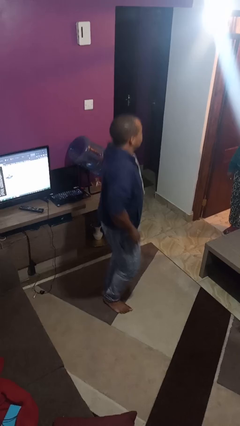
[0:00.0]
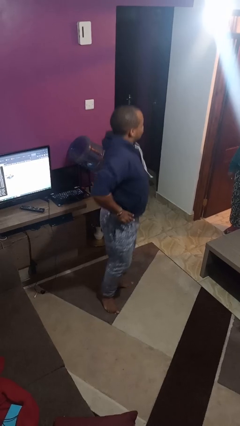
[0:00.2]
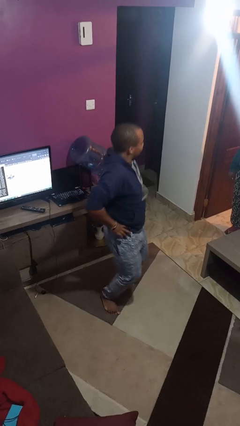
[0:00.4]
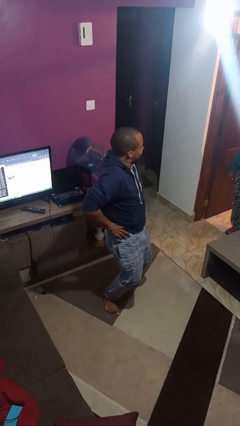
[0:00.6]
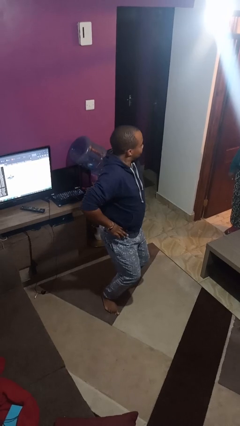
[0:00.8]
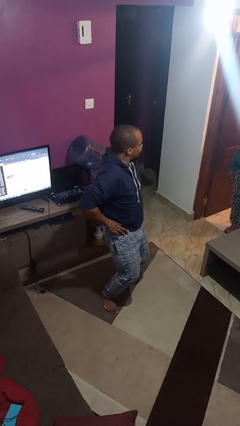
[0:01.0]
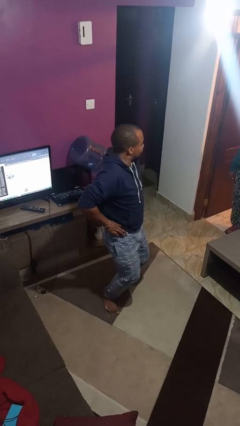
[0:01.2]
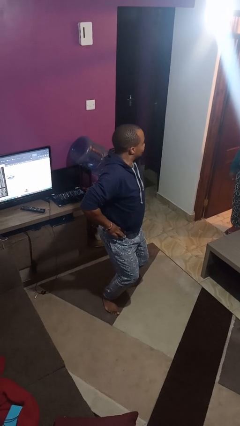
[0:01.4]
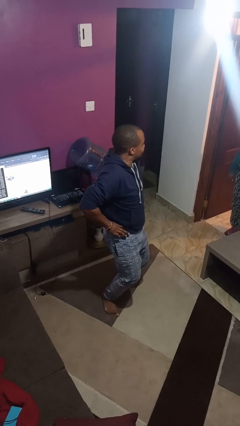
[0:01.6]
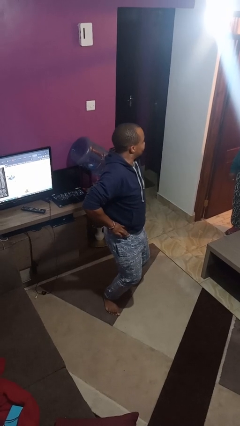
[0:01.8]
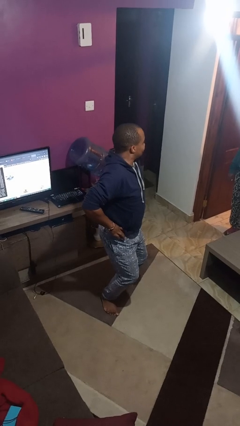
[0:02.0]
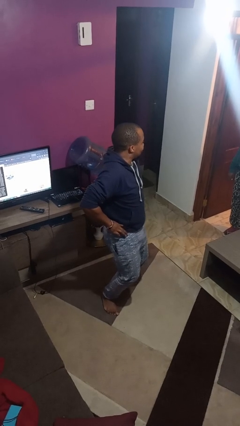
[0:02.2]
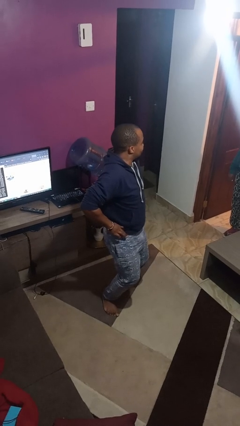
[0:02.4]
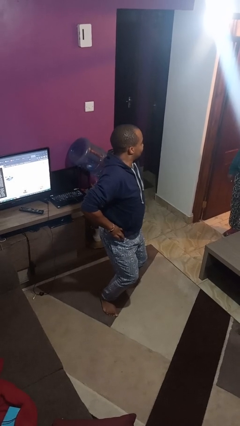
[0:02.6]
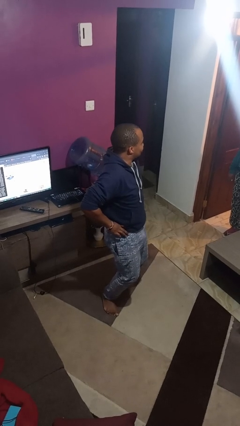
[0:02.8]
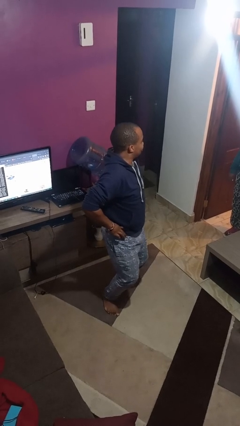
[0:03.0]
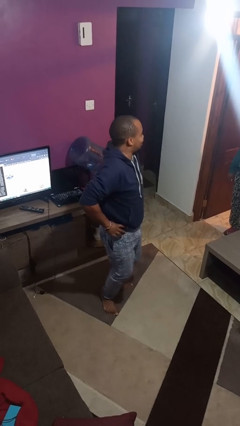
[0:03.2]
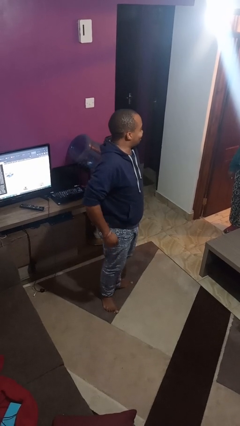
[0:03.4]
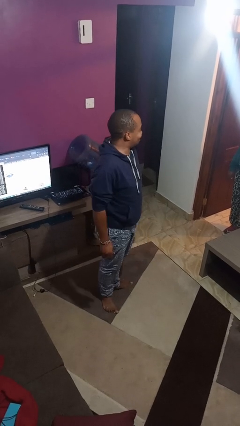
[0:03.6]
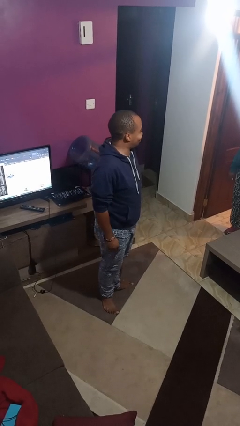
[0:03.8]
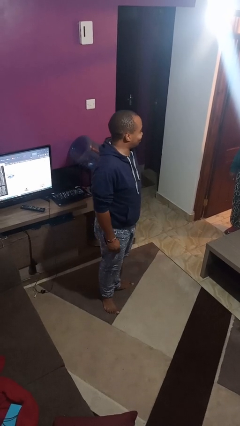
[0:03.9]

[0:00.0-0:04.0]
person wiggles hips

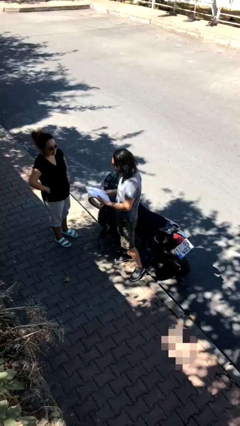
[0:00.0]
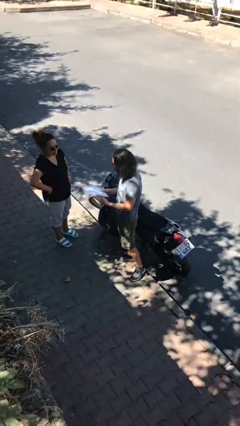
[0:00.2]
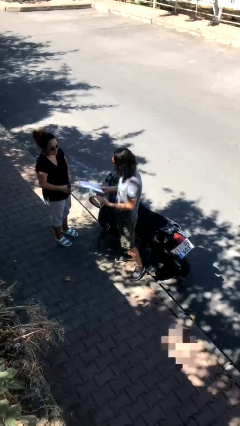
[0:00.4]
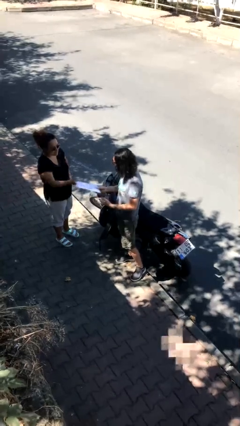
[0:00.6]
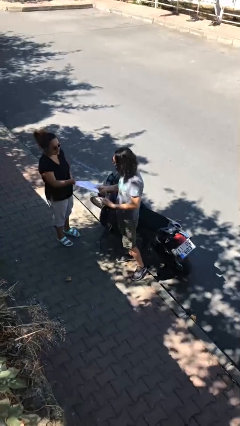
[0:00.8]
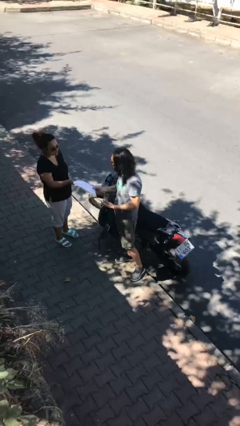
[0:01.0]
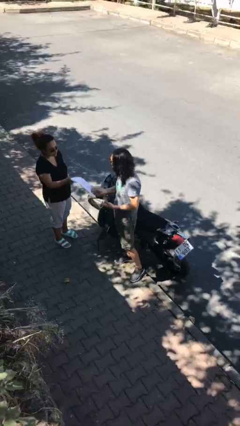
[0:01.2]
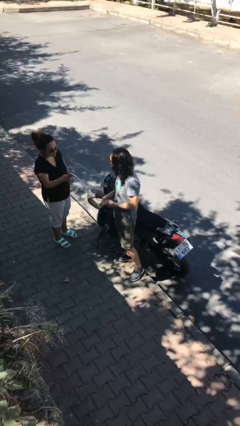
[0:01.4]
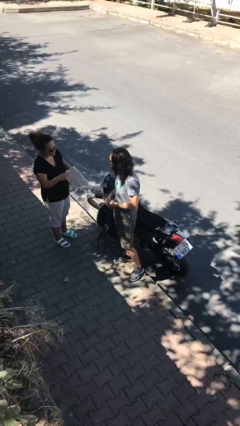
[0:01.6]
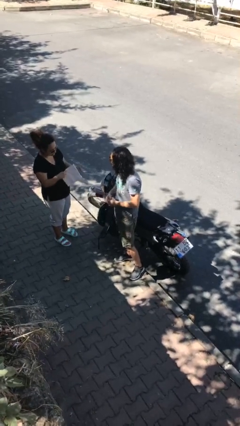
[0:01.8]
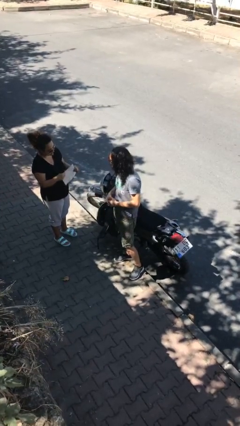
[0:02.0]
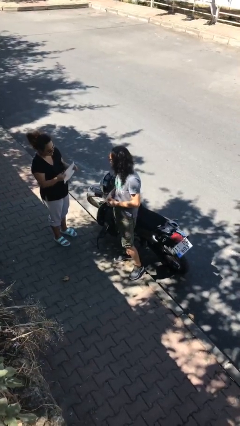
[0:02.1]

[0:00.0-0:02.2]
person transfers object to person

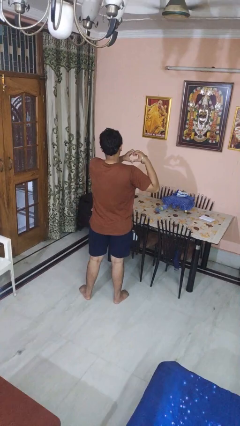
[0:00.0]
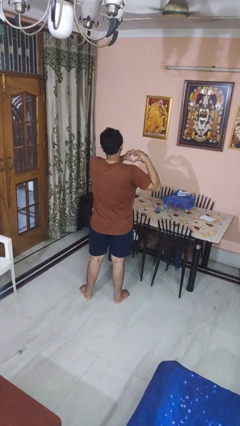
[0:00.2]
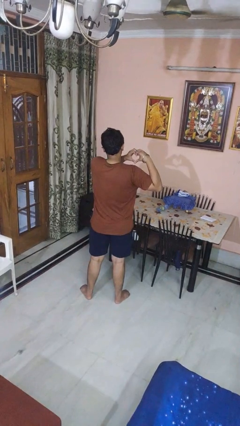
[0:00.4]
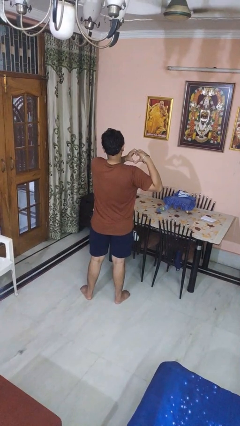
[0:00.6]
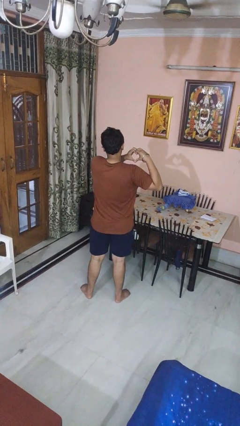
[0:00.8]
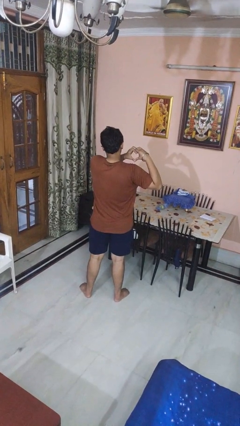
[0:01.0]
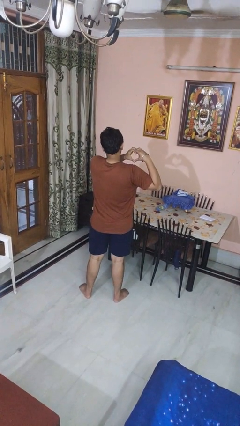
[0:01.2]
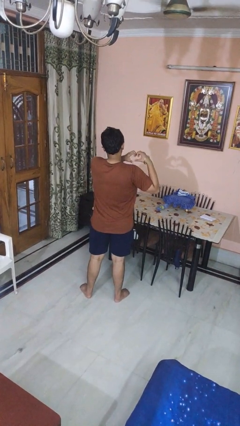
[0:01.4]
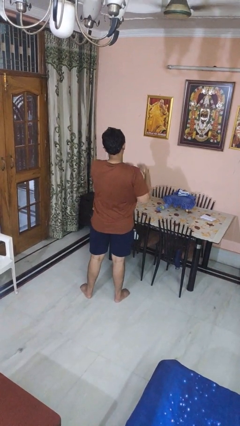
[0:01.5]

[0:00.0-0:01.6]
person gestures heart

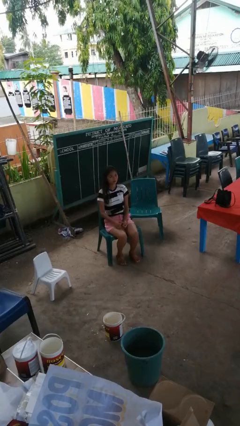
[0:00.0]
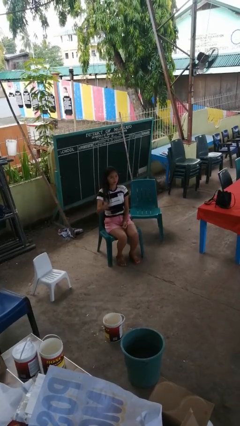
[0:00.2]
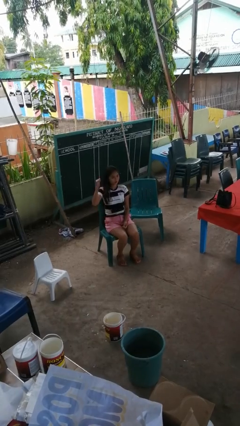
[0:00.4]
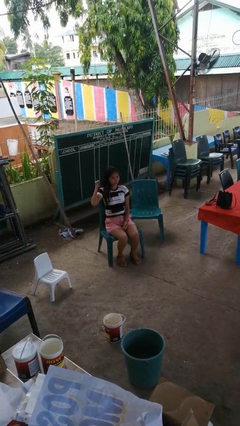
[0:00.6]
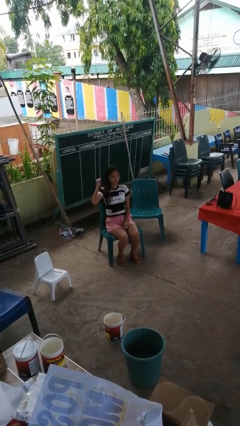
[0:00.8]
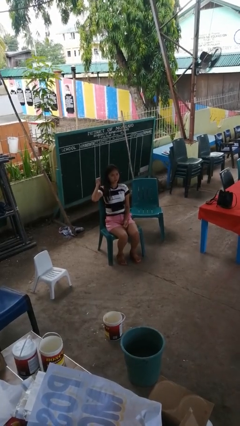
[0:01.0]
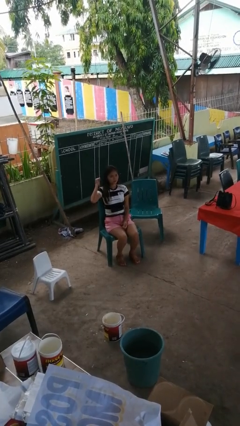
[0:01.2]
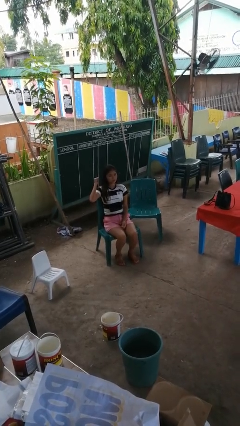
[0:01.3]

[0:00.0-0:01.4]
person gestures behind me

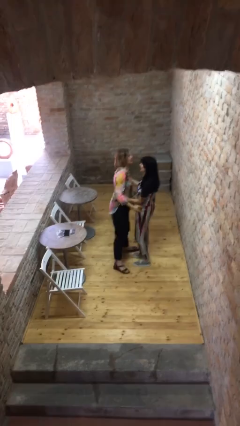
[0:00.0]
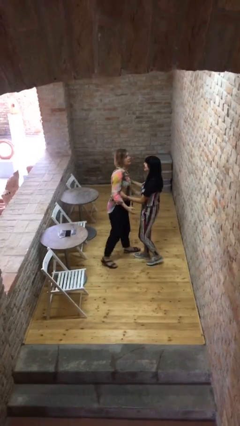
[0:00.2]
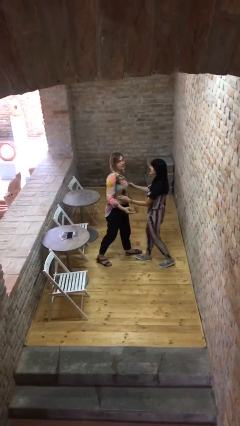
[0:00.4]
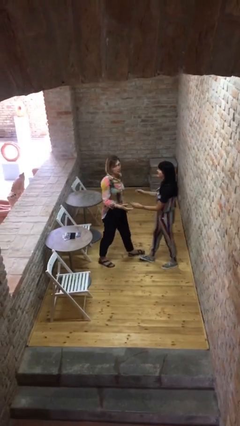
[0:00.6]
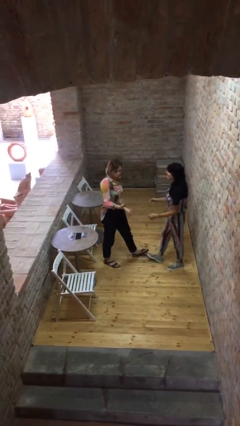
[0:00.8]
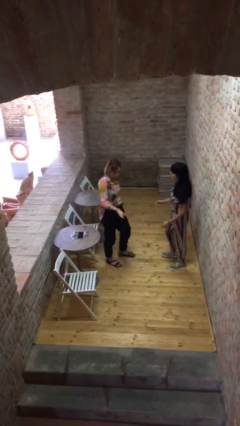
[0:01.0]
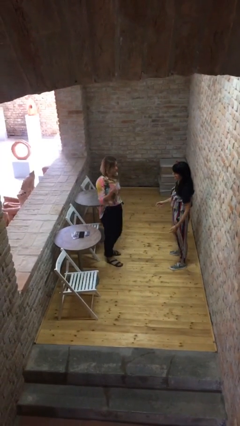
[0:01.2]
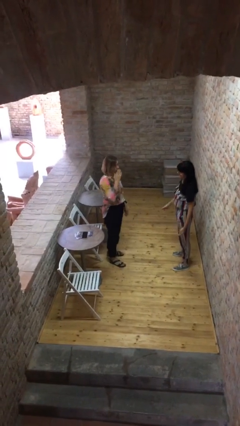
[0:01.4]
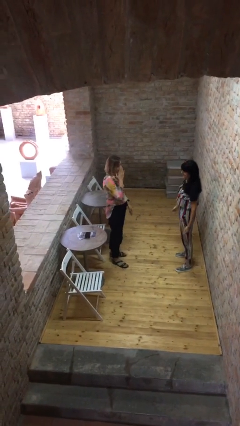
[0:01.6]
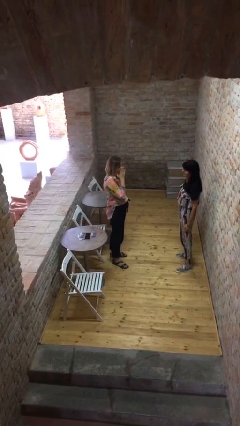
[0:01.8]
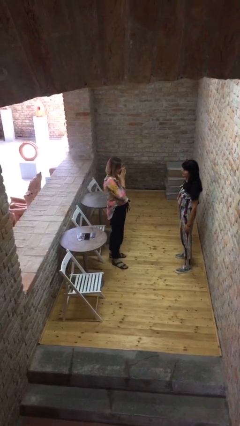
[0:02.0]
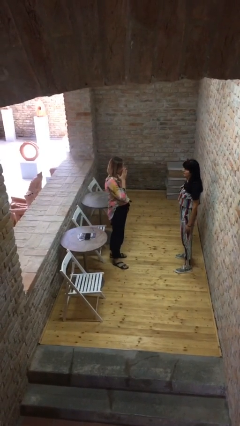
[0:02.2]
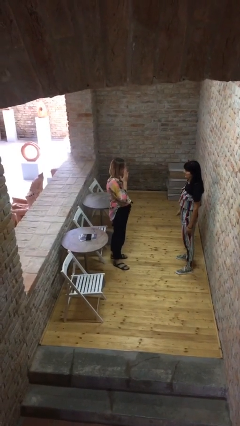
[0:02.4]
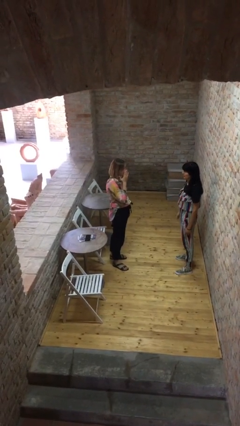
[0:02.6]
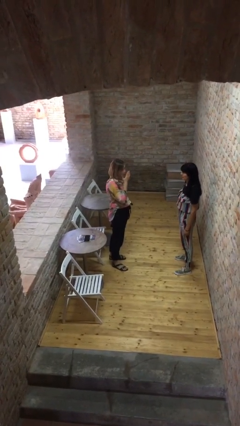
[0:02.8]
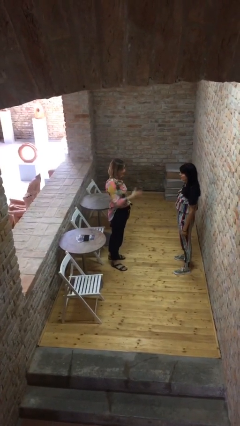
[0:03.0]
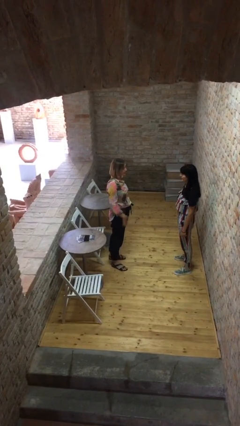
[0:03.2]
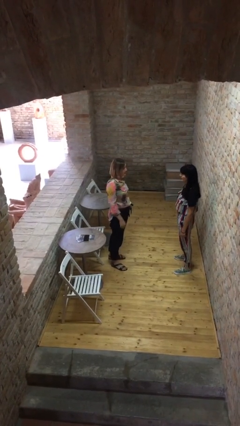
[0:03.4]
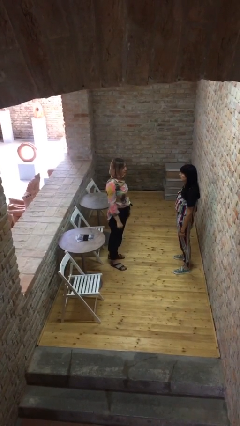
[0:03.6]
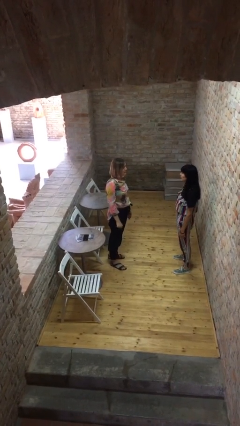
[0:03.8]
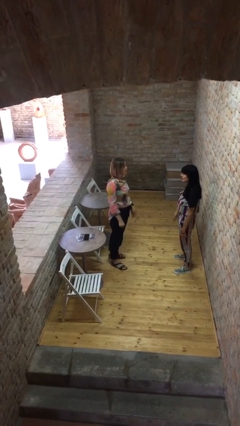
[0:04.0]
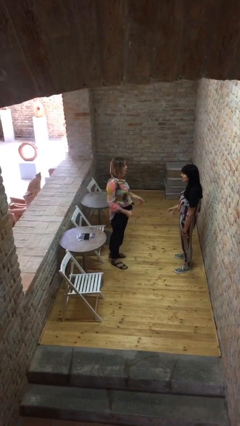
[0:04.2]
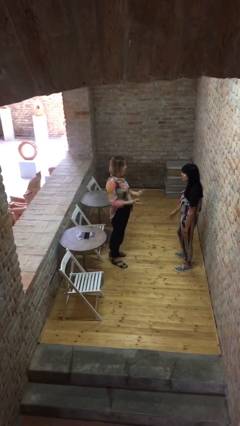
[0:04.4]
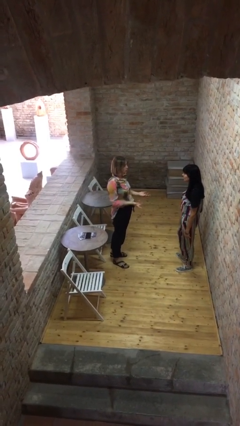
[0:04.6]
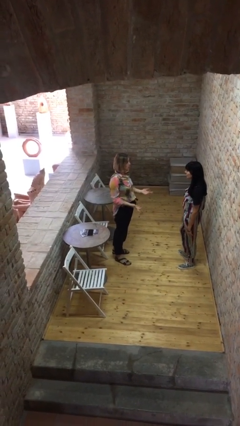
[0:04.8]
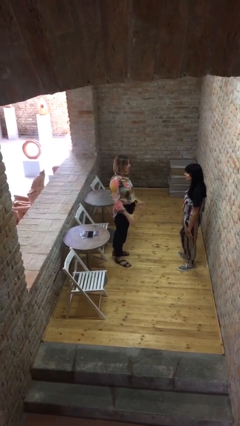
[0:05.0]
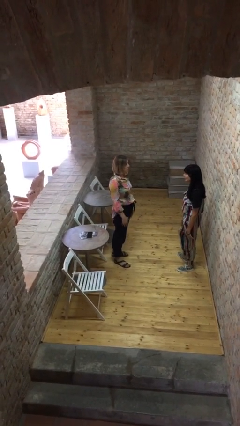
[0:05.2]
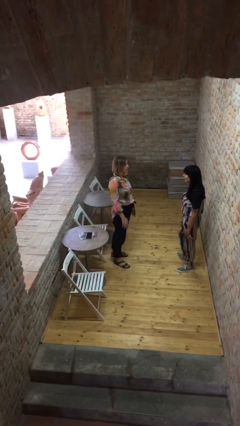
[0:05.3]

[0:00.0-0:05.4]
person talks to person

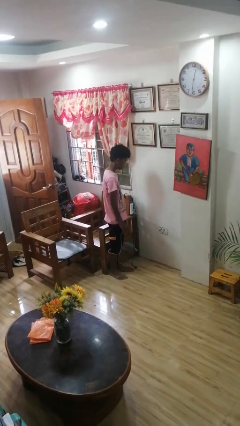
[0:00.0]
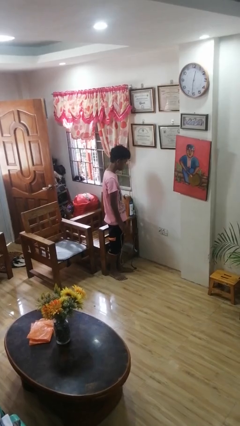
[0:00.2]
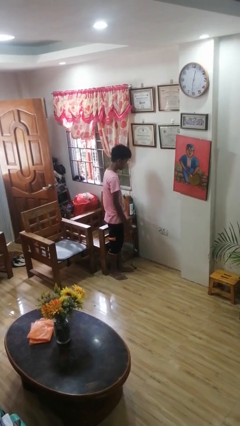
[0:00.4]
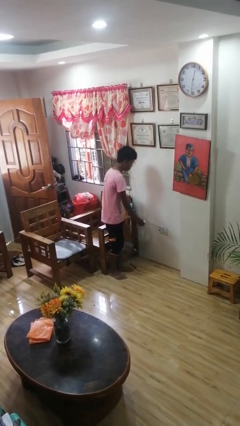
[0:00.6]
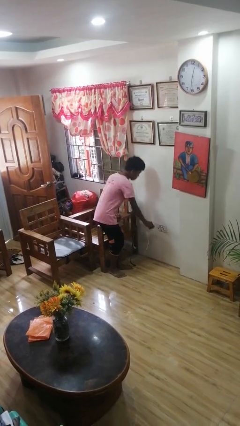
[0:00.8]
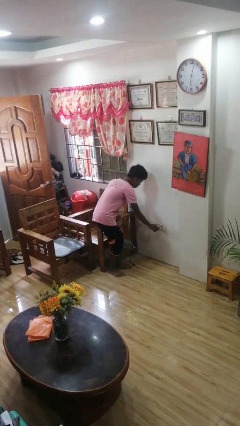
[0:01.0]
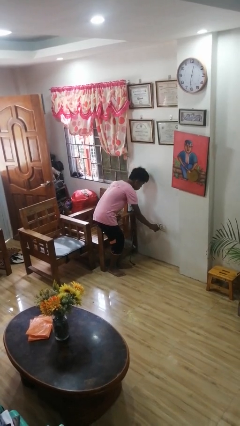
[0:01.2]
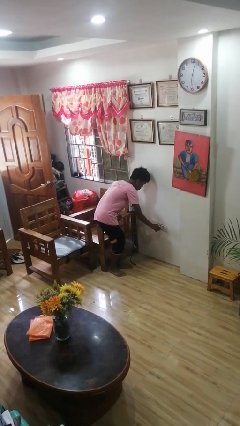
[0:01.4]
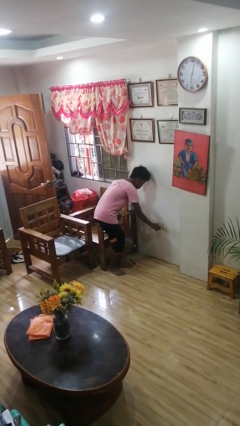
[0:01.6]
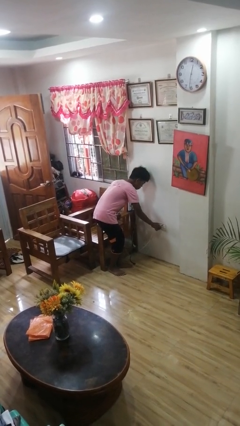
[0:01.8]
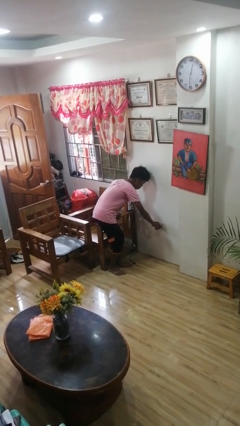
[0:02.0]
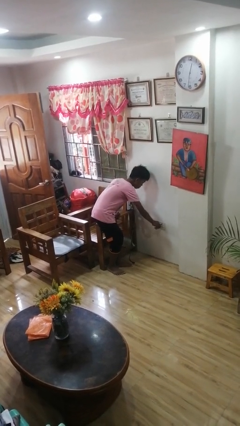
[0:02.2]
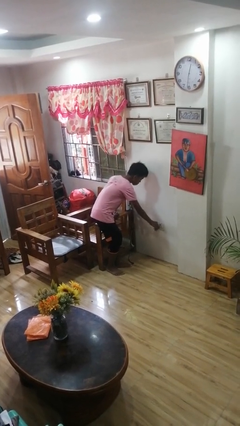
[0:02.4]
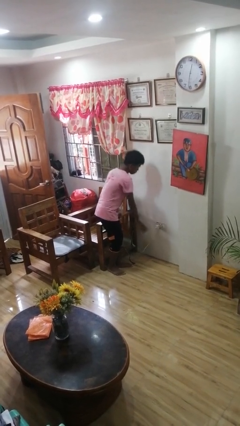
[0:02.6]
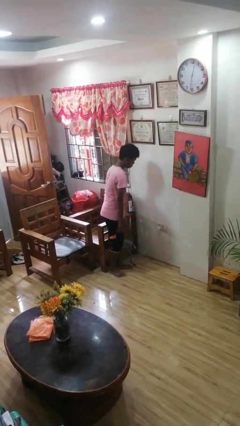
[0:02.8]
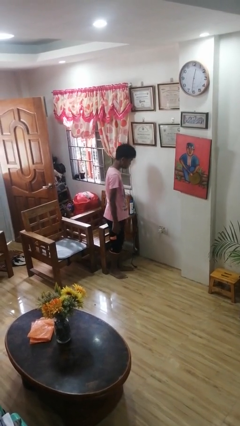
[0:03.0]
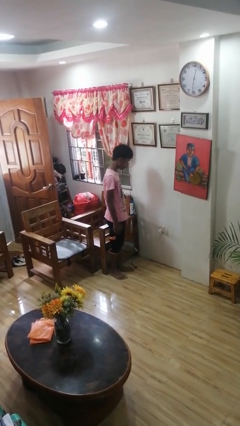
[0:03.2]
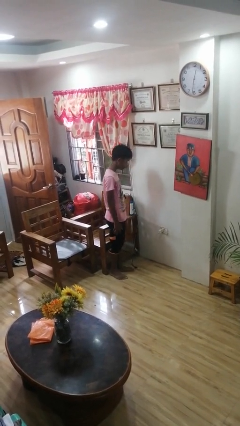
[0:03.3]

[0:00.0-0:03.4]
person plugs into electrical socket
